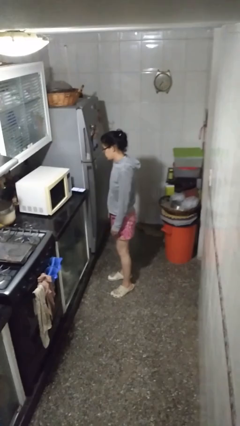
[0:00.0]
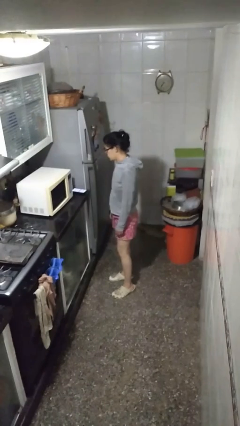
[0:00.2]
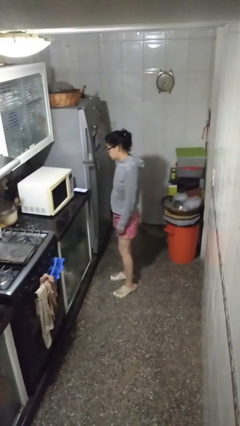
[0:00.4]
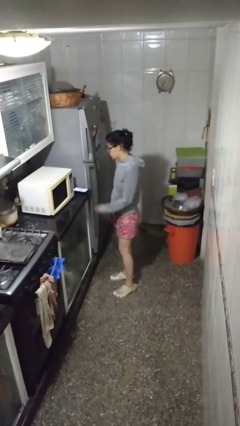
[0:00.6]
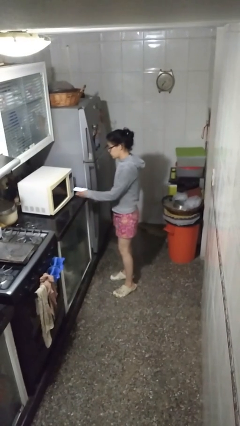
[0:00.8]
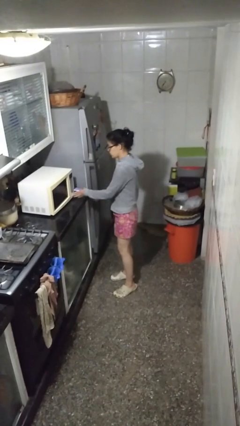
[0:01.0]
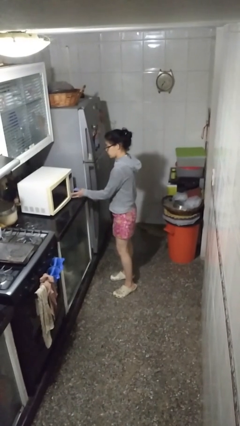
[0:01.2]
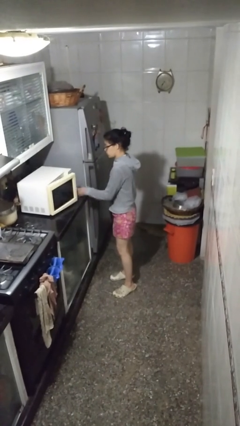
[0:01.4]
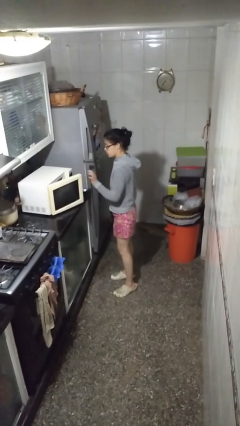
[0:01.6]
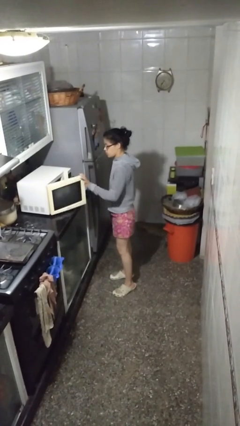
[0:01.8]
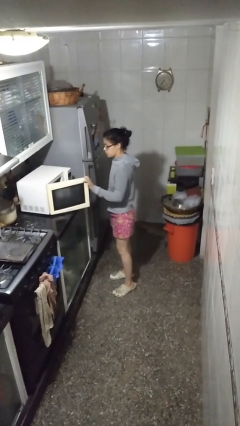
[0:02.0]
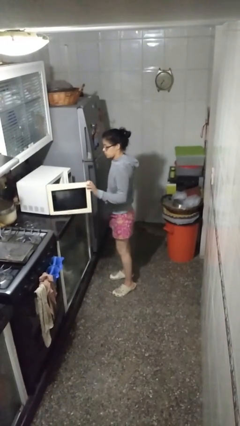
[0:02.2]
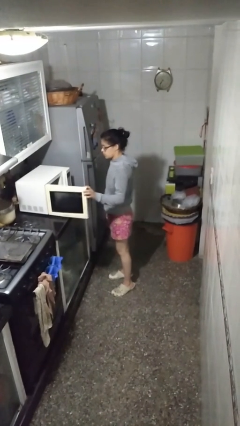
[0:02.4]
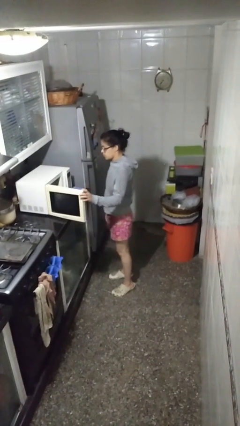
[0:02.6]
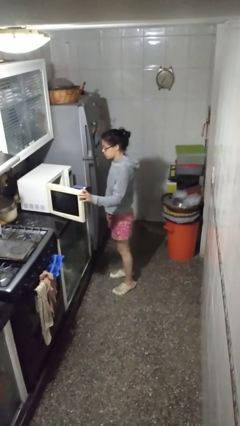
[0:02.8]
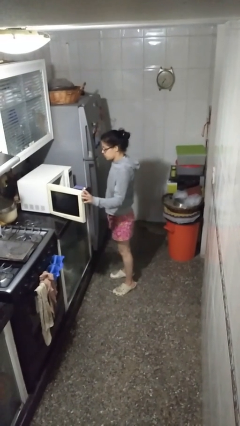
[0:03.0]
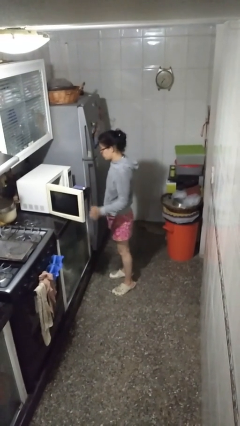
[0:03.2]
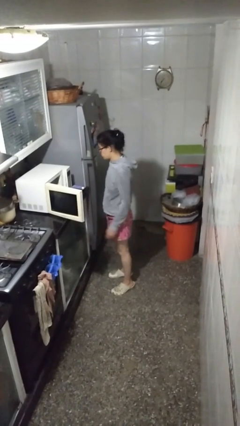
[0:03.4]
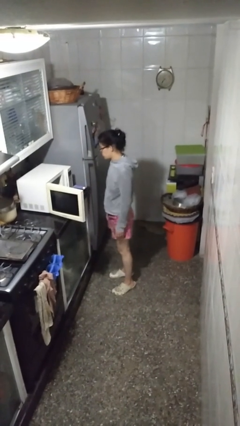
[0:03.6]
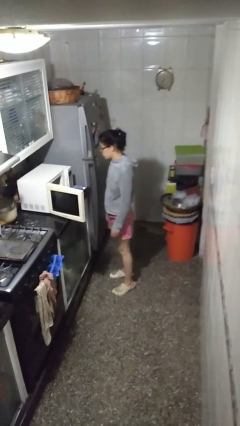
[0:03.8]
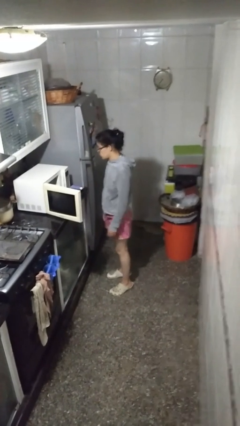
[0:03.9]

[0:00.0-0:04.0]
person opens microwave

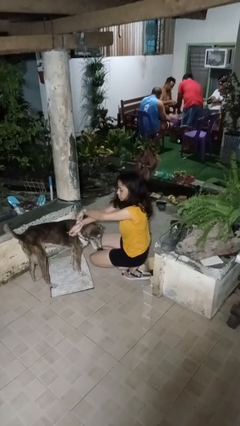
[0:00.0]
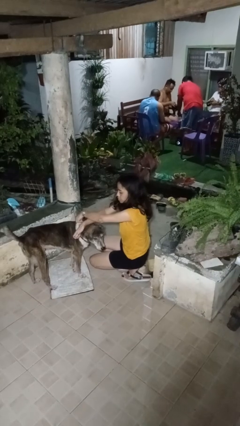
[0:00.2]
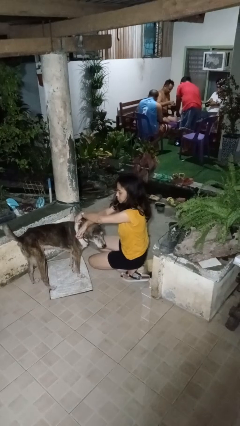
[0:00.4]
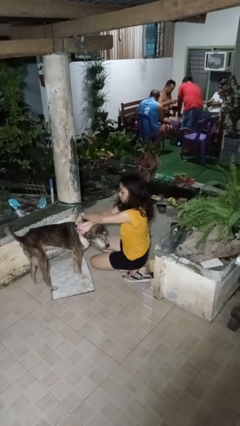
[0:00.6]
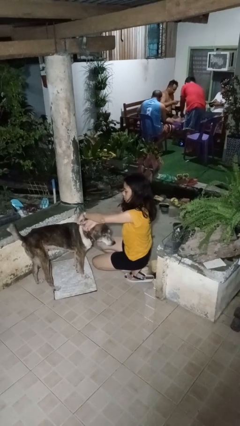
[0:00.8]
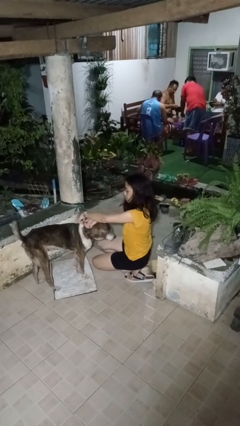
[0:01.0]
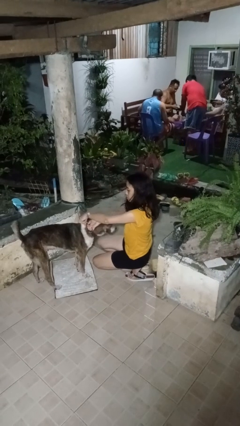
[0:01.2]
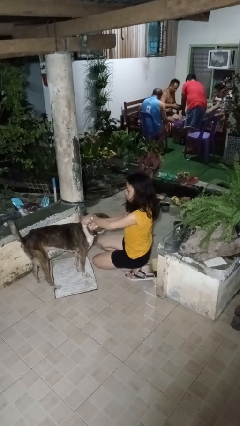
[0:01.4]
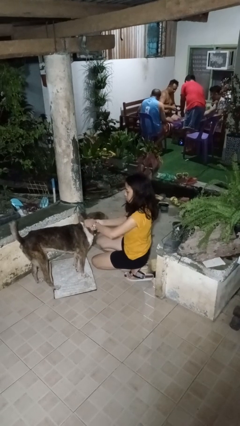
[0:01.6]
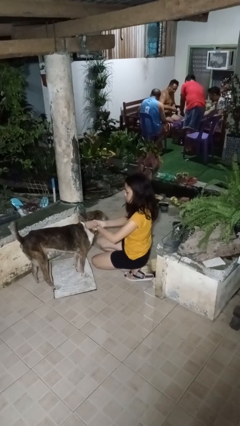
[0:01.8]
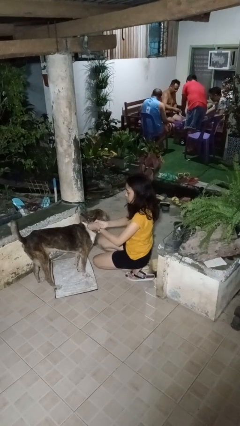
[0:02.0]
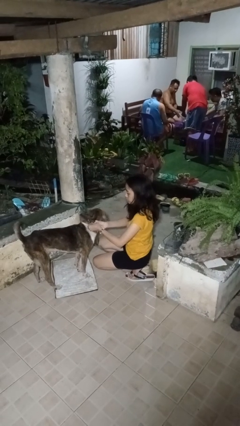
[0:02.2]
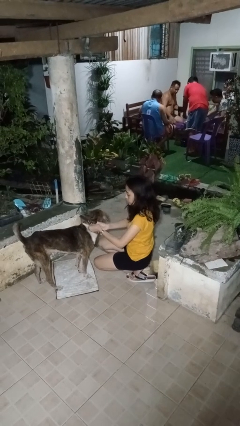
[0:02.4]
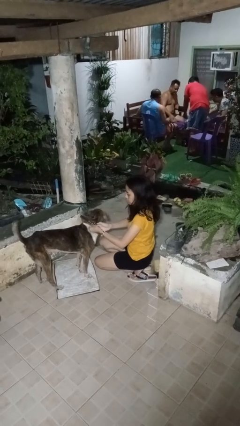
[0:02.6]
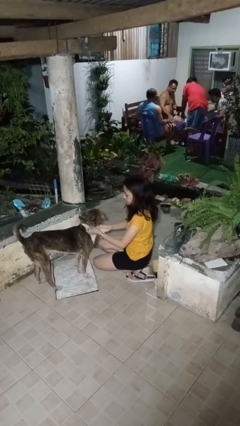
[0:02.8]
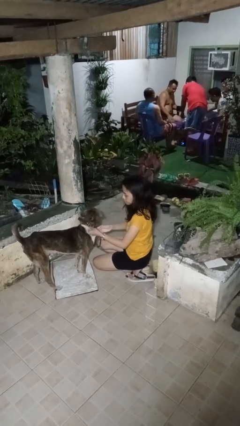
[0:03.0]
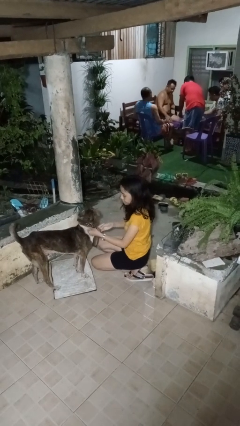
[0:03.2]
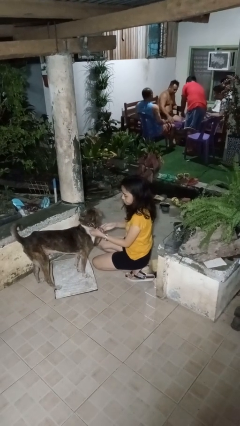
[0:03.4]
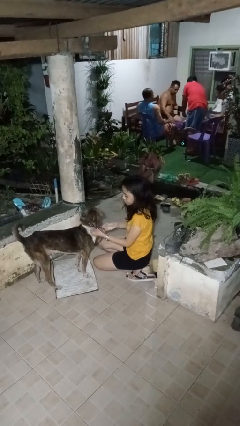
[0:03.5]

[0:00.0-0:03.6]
person attaches leash to dog

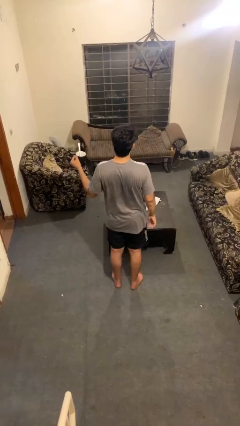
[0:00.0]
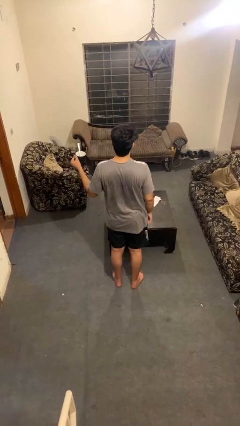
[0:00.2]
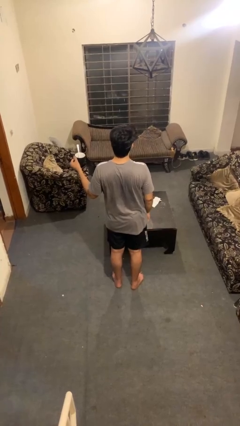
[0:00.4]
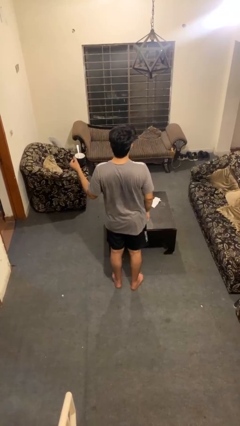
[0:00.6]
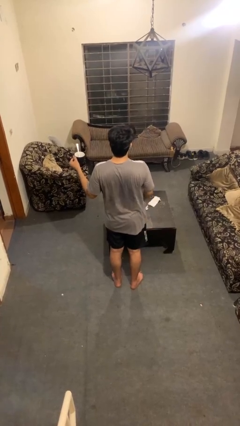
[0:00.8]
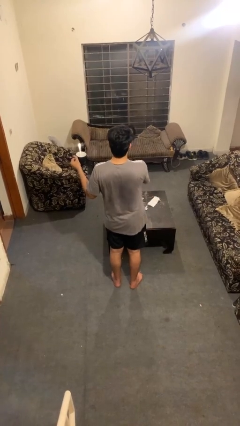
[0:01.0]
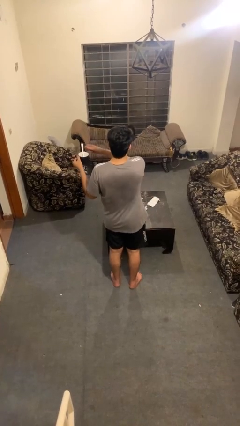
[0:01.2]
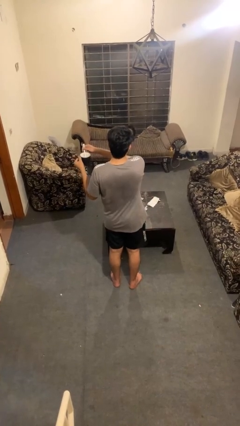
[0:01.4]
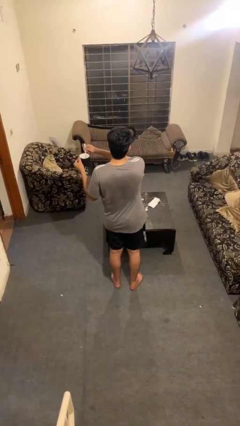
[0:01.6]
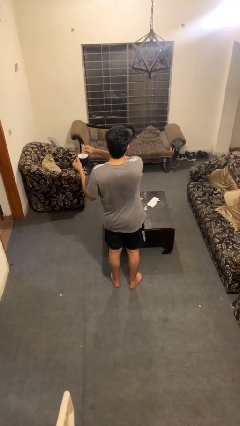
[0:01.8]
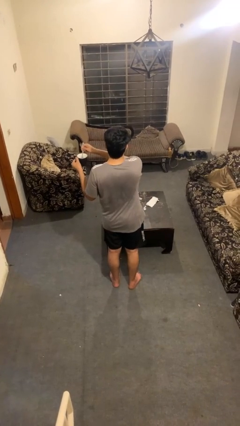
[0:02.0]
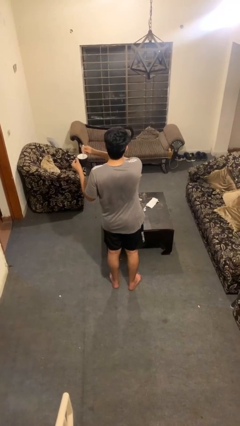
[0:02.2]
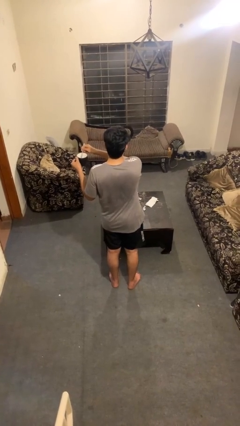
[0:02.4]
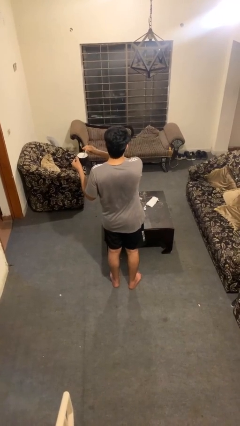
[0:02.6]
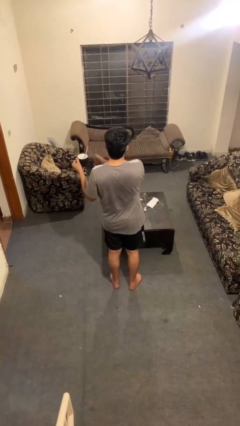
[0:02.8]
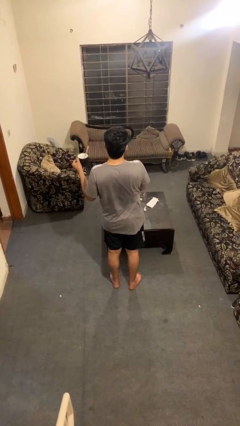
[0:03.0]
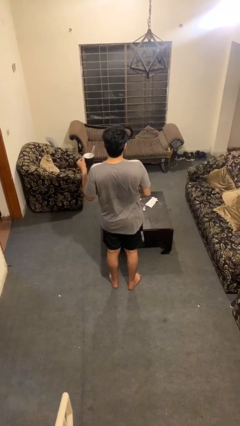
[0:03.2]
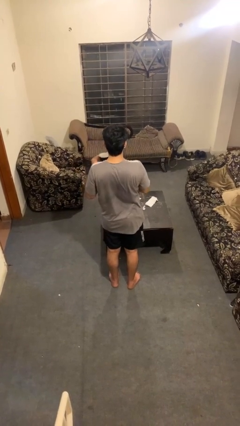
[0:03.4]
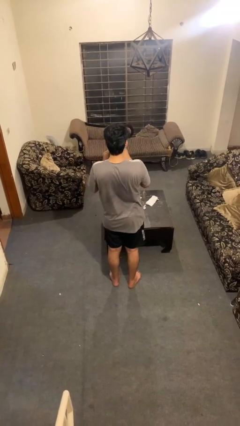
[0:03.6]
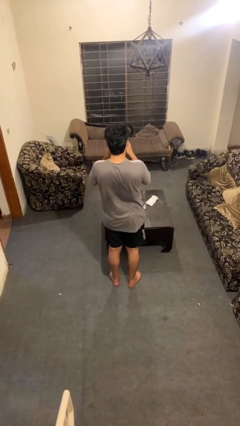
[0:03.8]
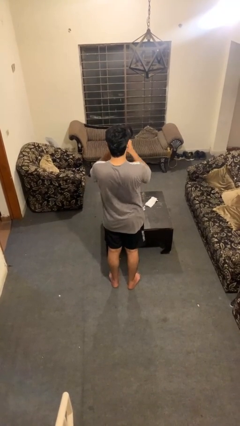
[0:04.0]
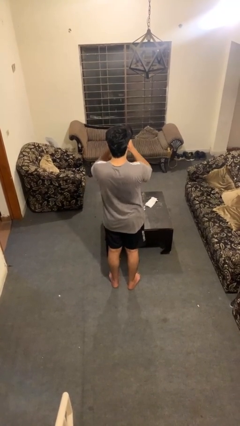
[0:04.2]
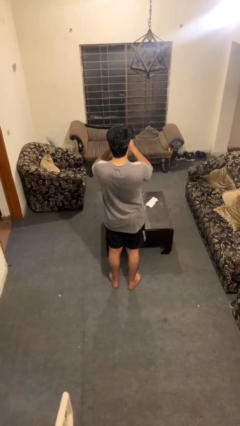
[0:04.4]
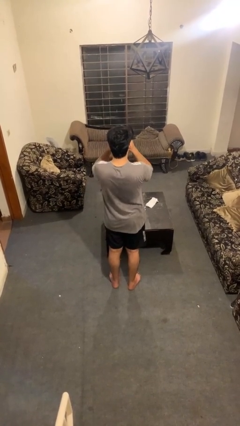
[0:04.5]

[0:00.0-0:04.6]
person stirs mug

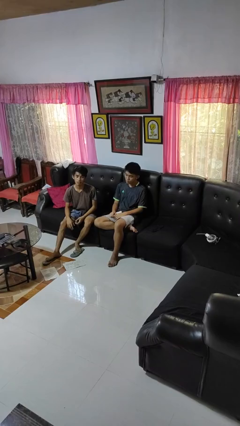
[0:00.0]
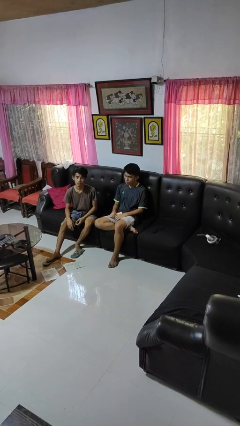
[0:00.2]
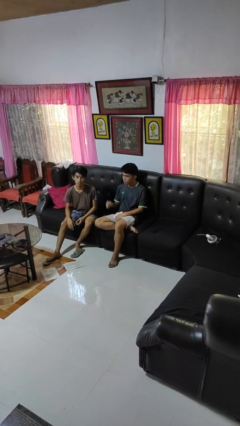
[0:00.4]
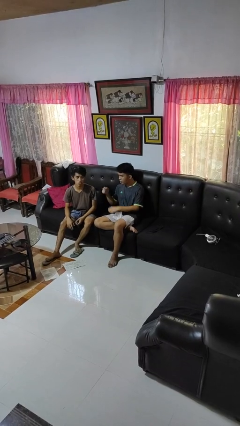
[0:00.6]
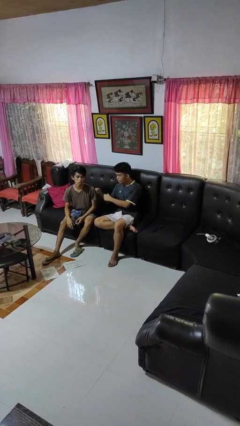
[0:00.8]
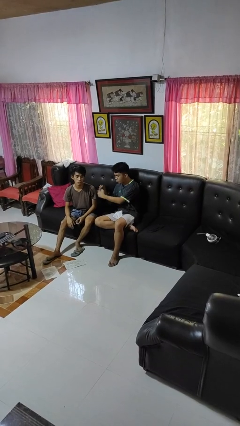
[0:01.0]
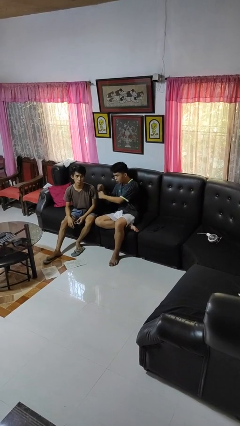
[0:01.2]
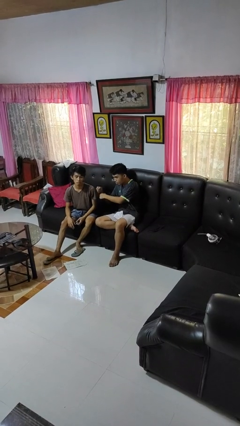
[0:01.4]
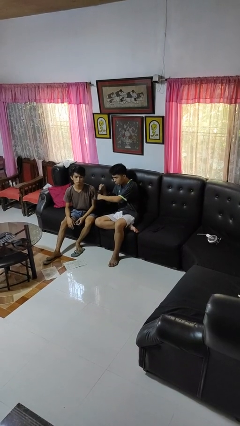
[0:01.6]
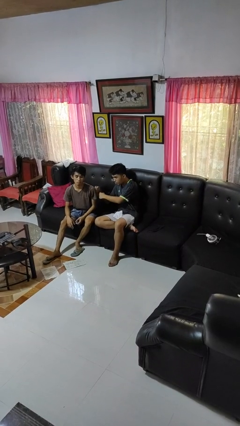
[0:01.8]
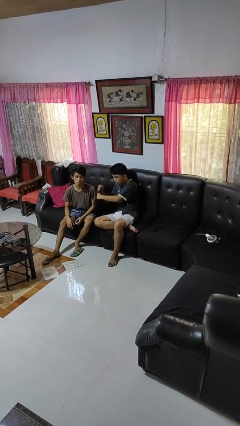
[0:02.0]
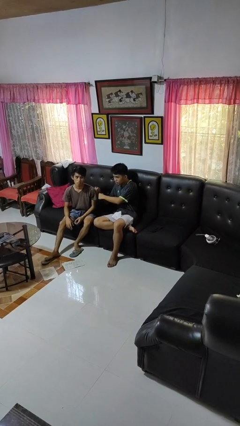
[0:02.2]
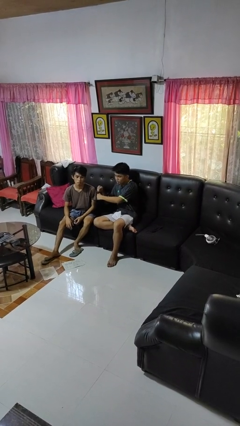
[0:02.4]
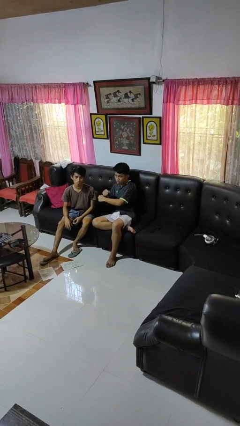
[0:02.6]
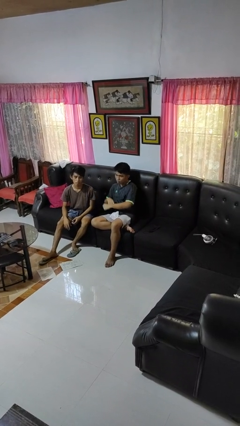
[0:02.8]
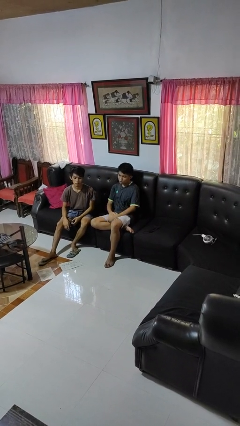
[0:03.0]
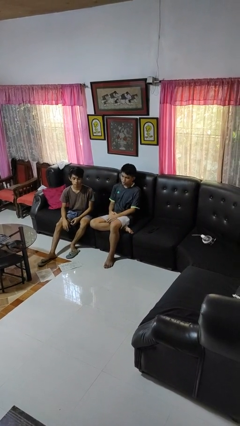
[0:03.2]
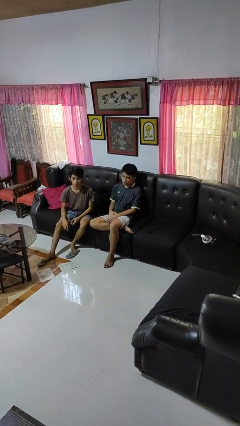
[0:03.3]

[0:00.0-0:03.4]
person pounds shoulders of person

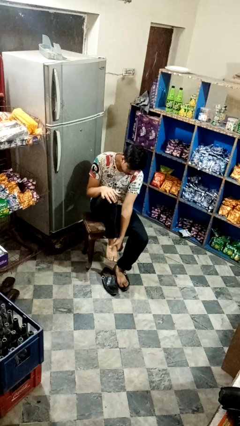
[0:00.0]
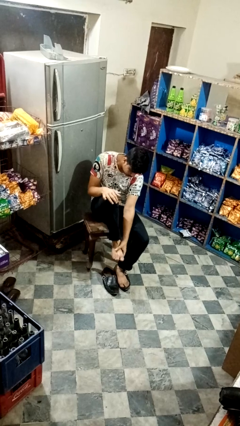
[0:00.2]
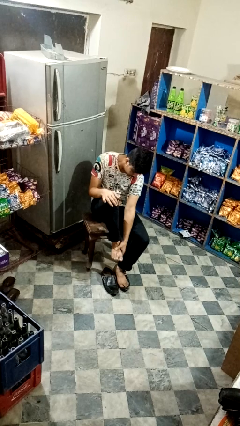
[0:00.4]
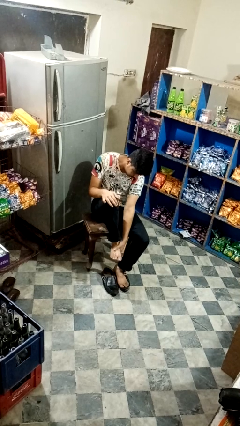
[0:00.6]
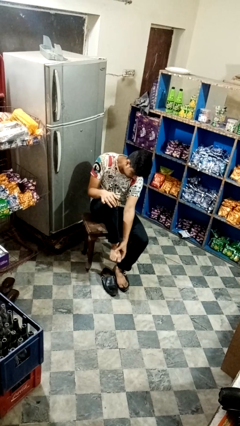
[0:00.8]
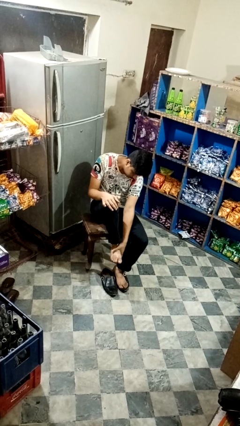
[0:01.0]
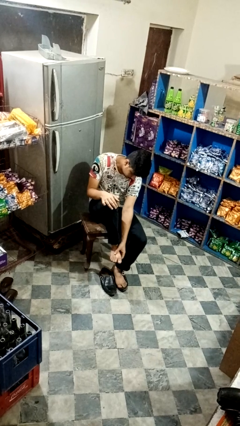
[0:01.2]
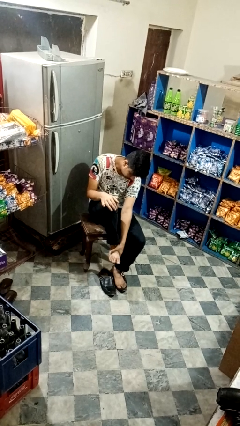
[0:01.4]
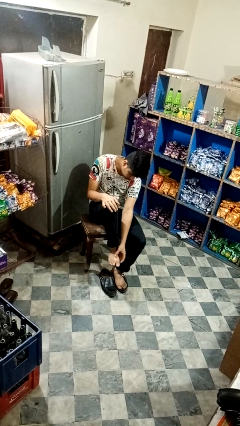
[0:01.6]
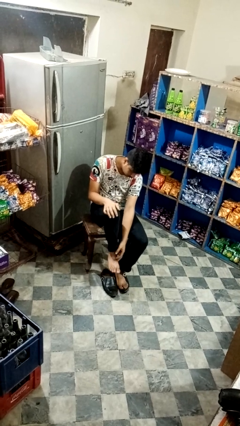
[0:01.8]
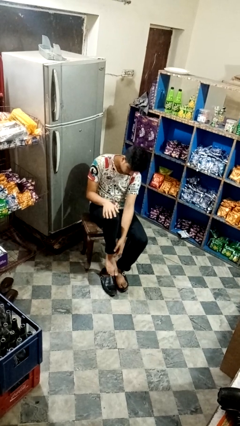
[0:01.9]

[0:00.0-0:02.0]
person rubs foot
